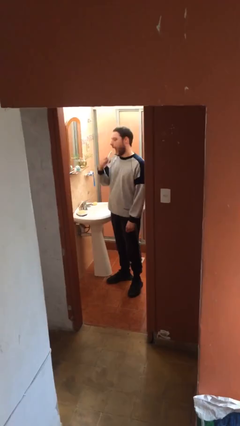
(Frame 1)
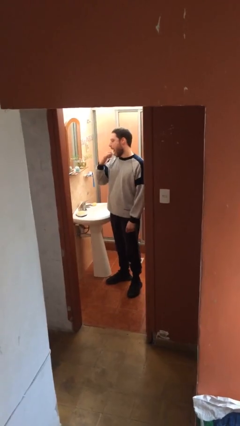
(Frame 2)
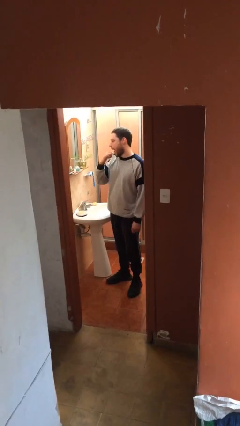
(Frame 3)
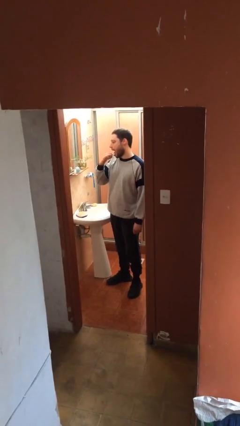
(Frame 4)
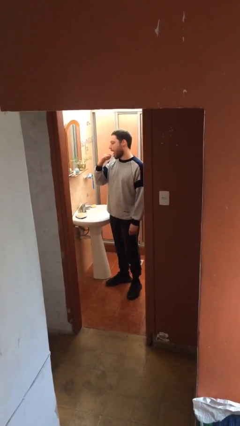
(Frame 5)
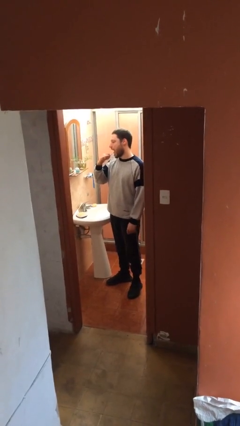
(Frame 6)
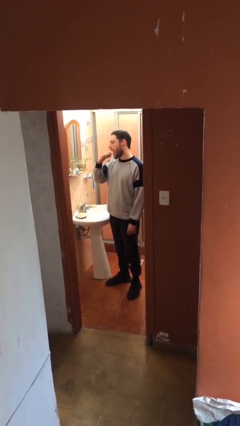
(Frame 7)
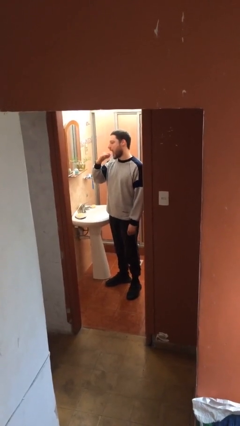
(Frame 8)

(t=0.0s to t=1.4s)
person brushes teeth

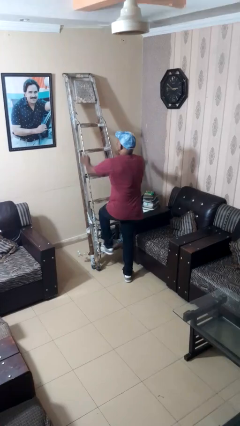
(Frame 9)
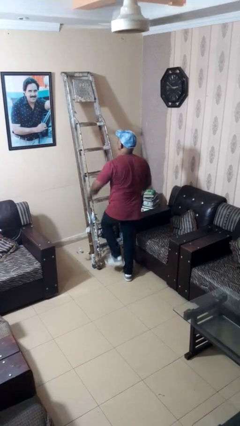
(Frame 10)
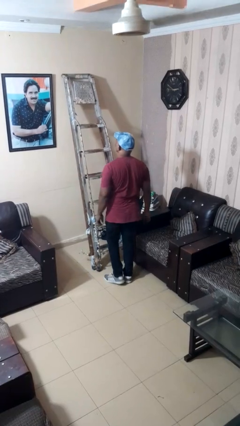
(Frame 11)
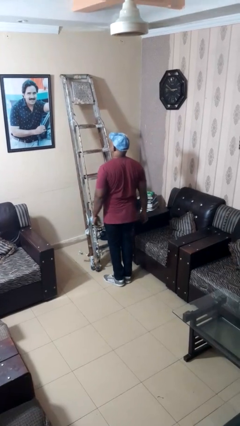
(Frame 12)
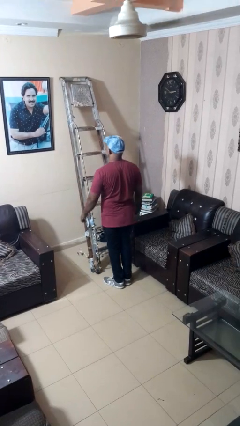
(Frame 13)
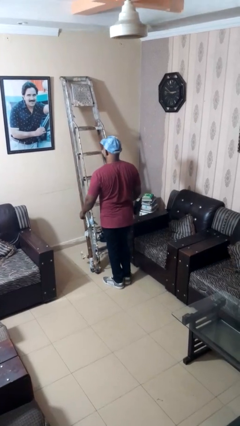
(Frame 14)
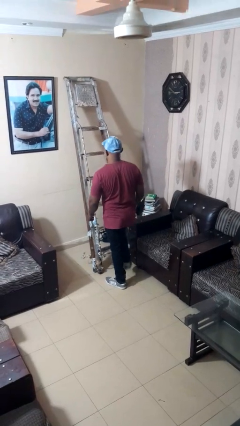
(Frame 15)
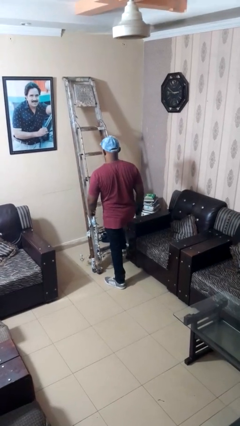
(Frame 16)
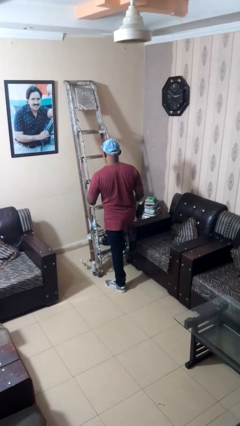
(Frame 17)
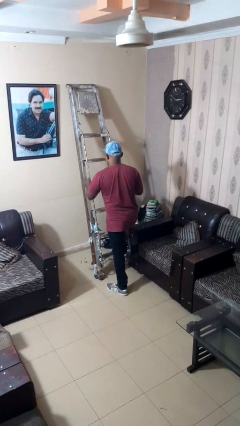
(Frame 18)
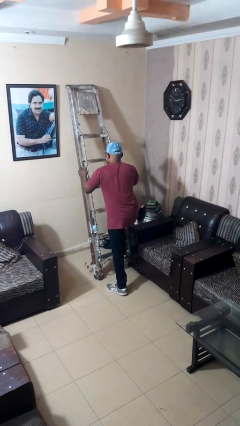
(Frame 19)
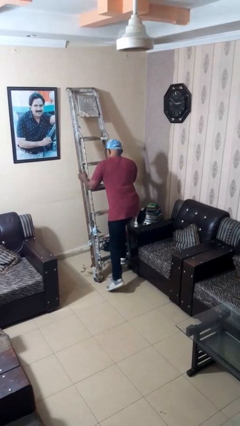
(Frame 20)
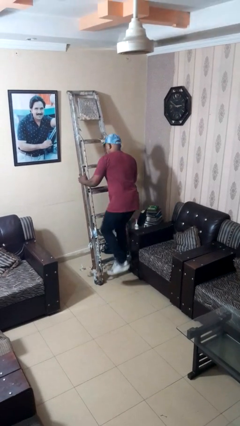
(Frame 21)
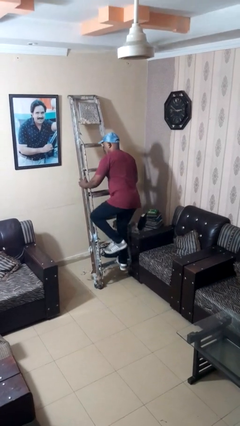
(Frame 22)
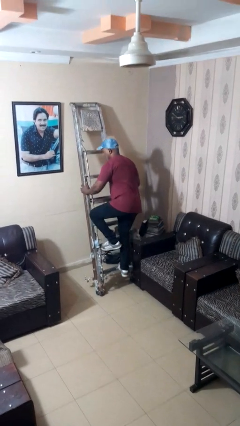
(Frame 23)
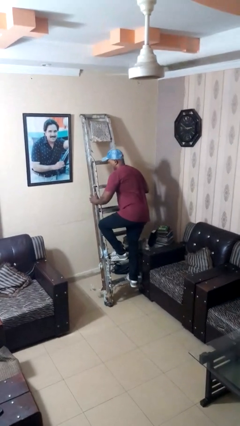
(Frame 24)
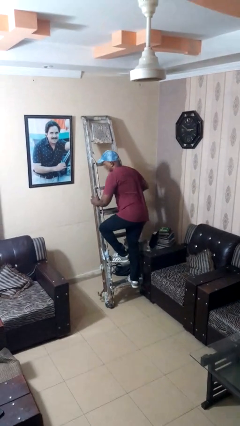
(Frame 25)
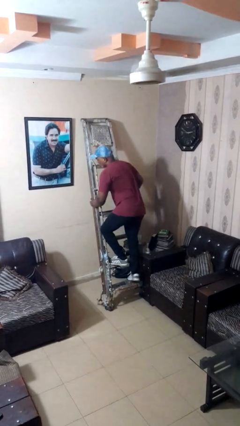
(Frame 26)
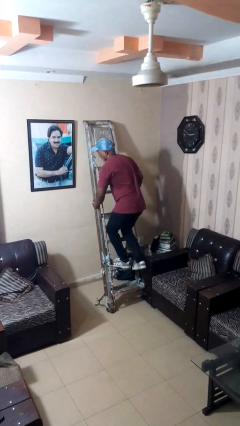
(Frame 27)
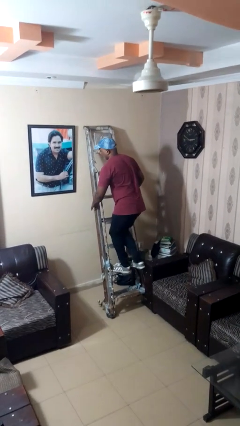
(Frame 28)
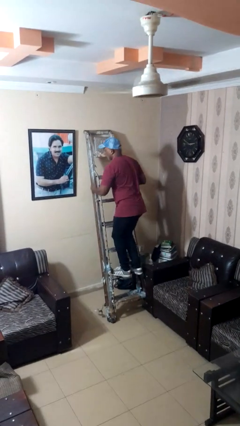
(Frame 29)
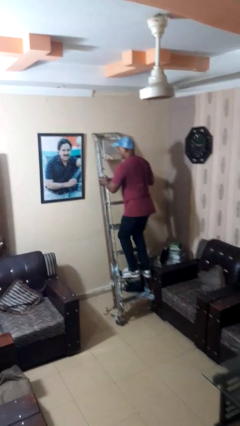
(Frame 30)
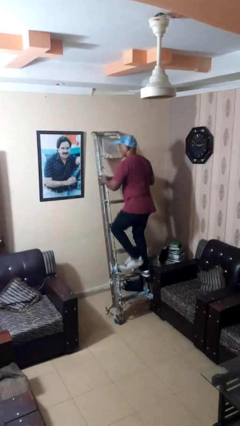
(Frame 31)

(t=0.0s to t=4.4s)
person climbs up ladder

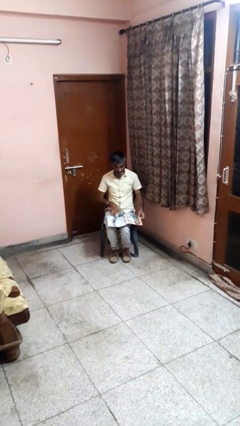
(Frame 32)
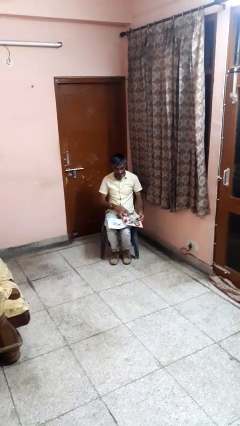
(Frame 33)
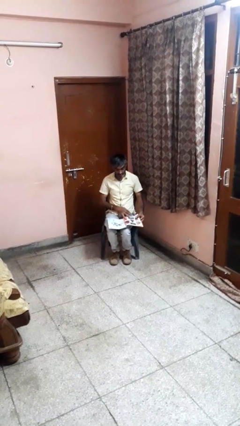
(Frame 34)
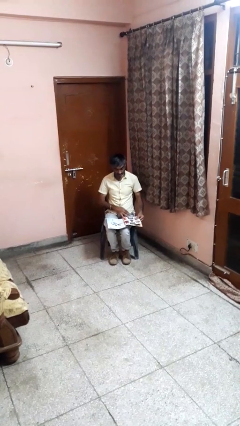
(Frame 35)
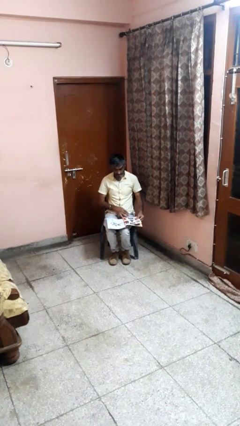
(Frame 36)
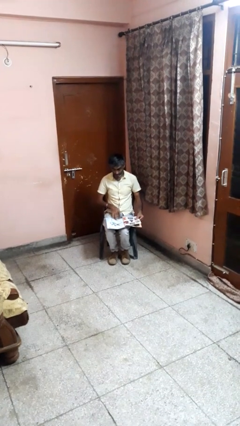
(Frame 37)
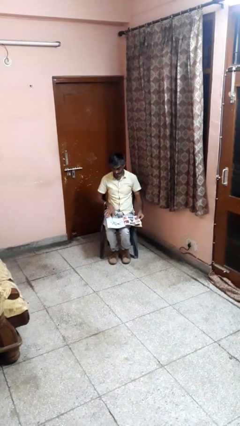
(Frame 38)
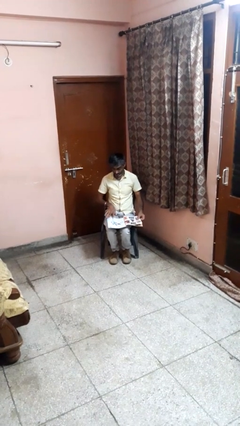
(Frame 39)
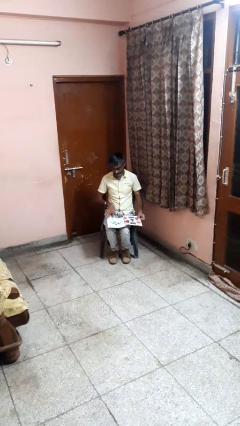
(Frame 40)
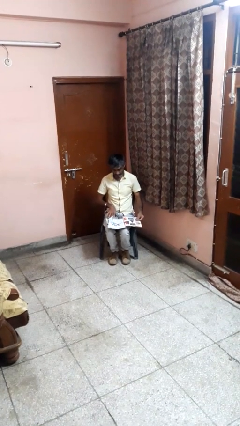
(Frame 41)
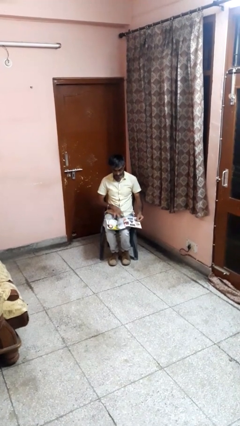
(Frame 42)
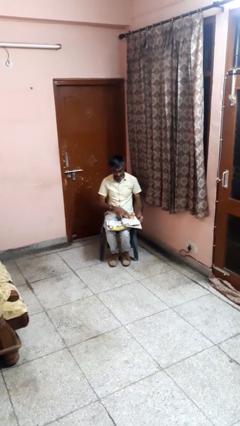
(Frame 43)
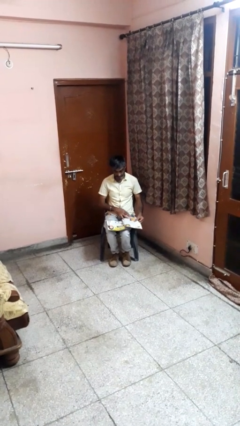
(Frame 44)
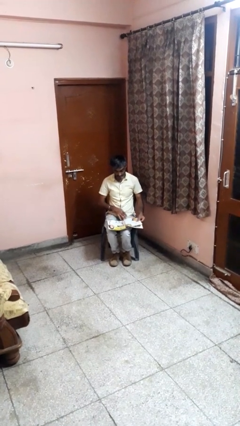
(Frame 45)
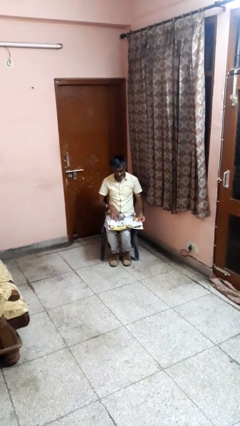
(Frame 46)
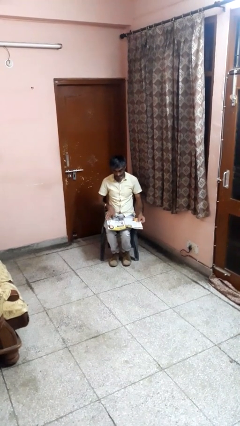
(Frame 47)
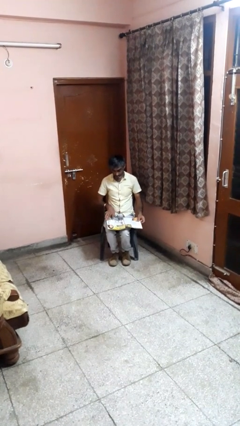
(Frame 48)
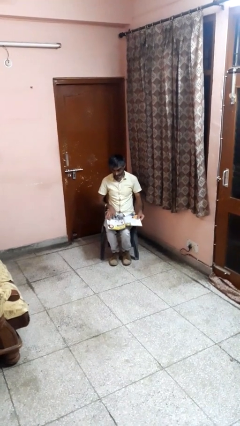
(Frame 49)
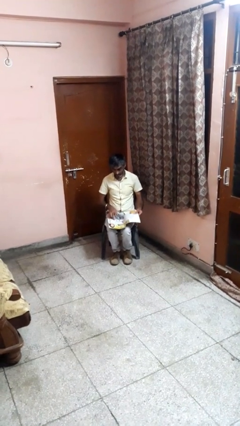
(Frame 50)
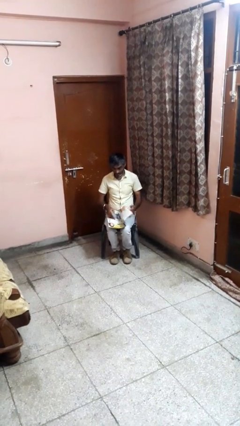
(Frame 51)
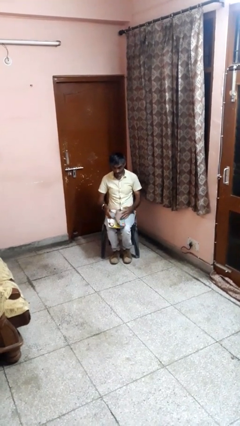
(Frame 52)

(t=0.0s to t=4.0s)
person reads magazine

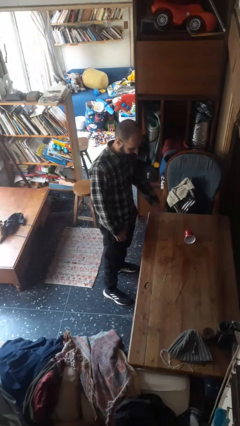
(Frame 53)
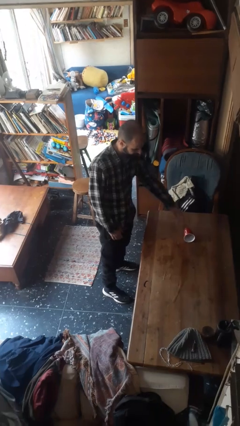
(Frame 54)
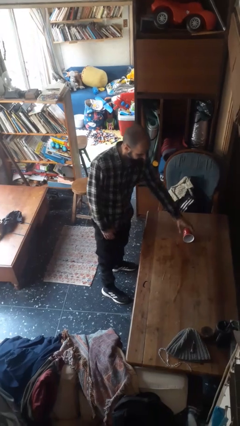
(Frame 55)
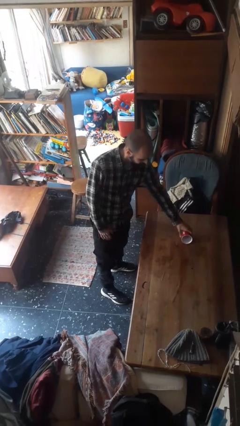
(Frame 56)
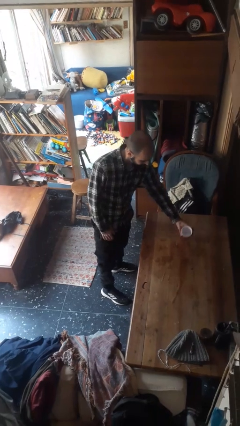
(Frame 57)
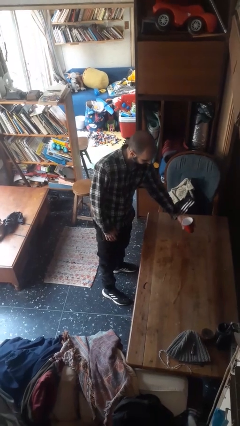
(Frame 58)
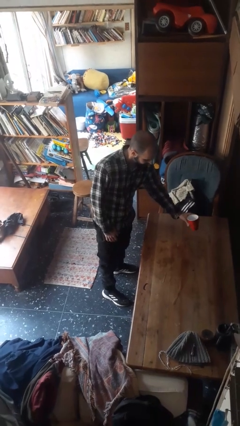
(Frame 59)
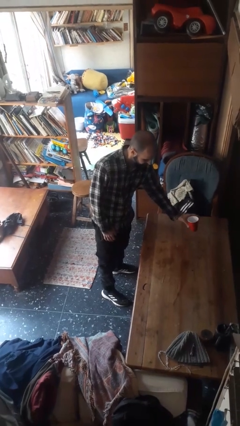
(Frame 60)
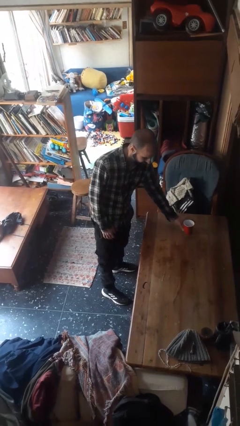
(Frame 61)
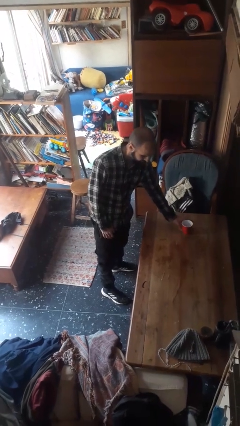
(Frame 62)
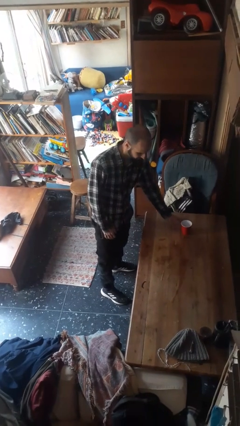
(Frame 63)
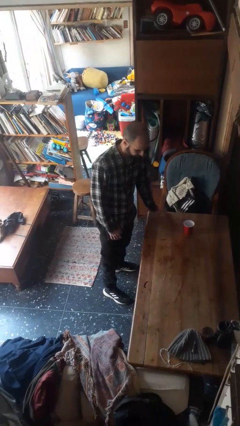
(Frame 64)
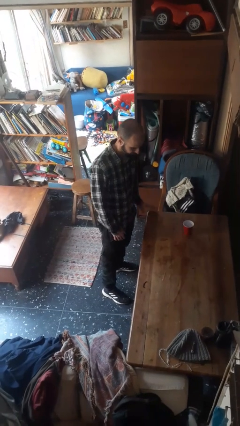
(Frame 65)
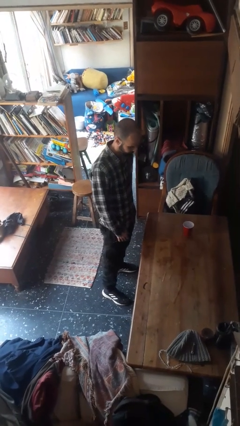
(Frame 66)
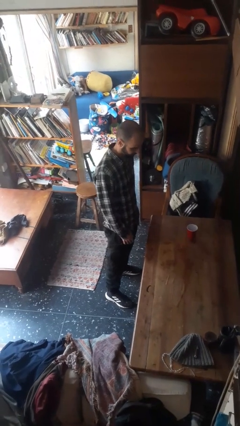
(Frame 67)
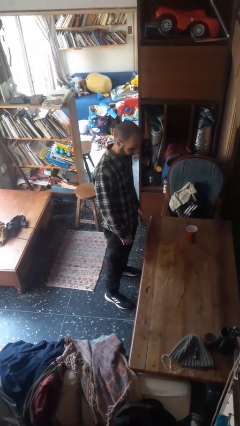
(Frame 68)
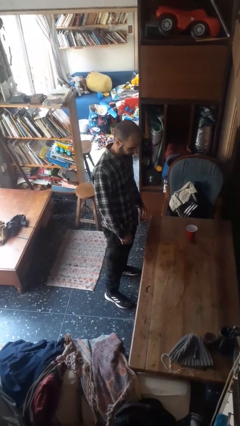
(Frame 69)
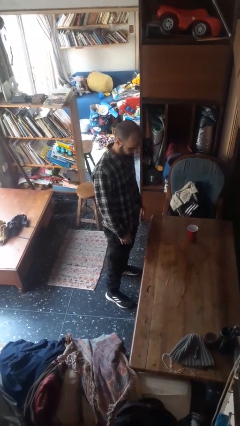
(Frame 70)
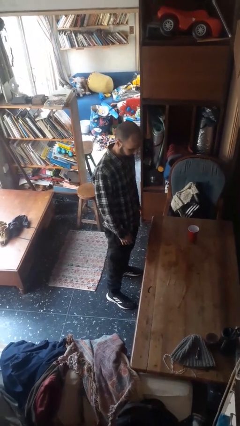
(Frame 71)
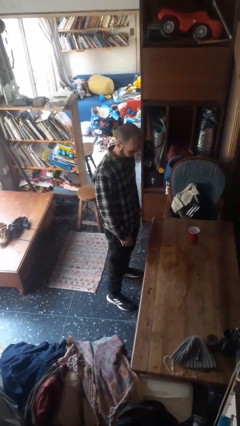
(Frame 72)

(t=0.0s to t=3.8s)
person sets upright glass

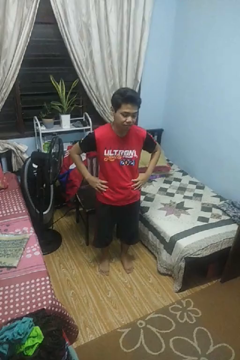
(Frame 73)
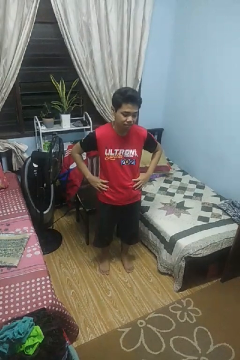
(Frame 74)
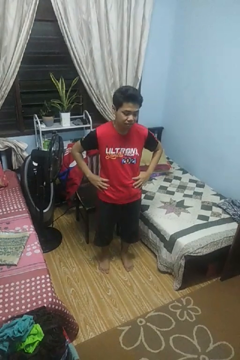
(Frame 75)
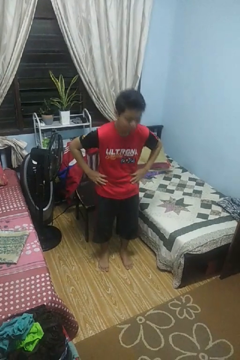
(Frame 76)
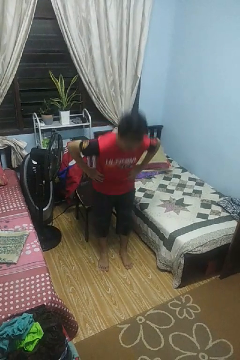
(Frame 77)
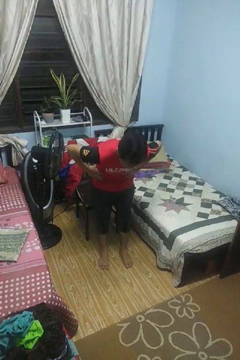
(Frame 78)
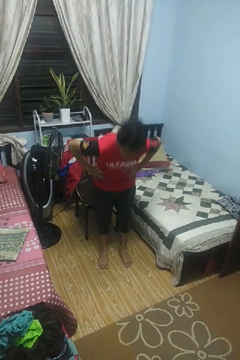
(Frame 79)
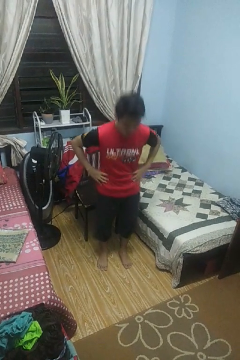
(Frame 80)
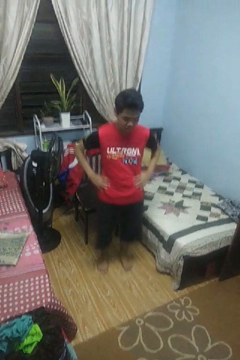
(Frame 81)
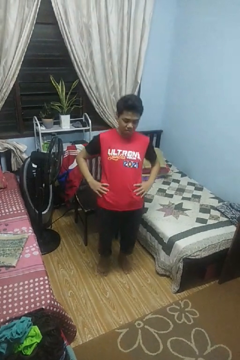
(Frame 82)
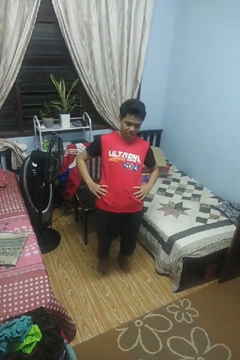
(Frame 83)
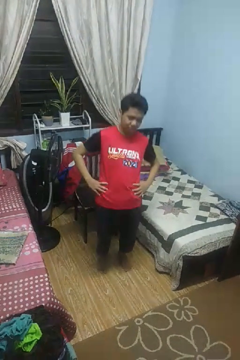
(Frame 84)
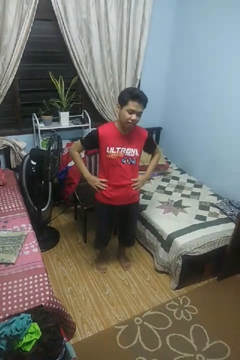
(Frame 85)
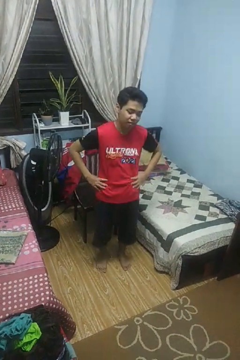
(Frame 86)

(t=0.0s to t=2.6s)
person wiggles hips

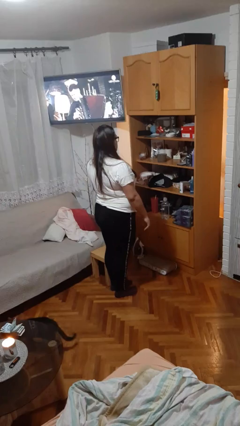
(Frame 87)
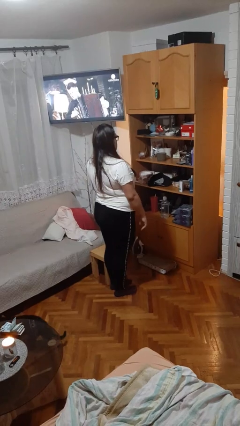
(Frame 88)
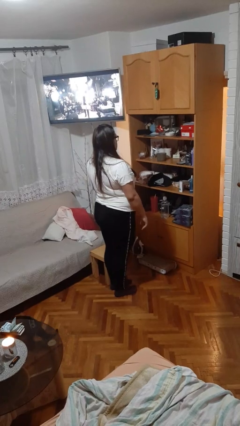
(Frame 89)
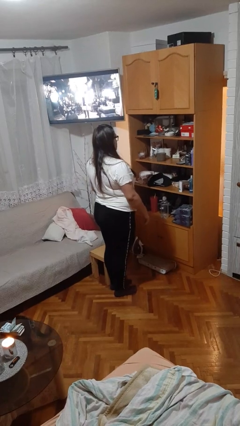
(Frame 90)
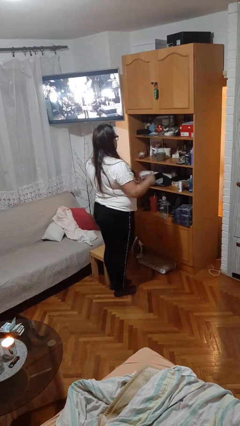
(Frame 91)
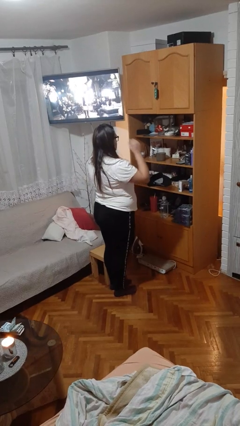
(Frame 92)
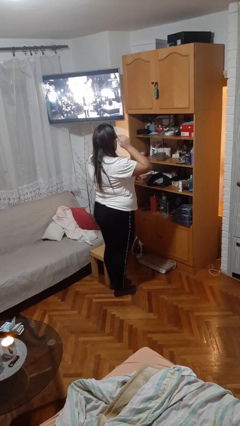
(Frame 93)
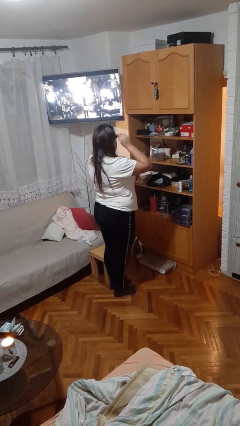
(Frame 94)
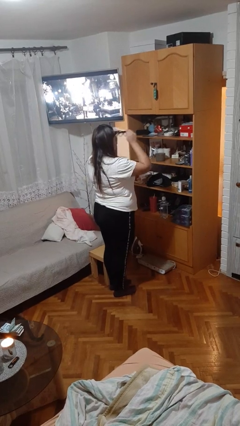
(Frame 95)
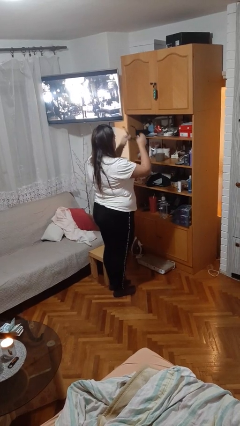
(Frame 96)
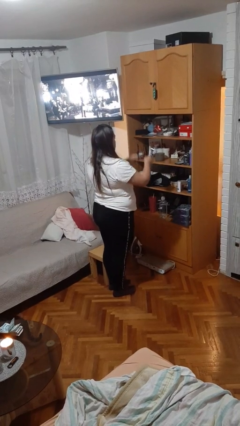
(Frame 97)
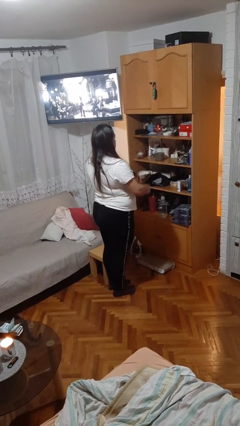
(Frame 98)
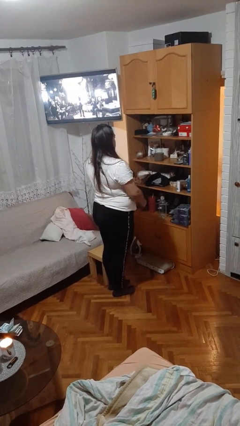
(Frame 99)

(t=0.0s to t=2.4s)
person takes off glasses
